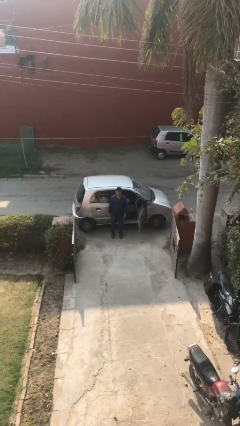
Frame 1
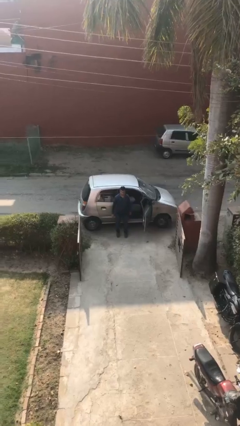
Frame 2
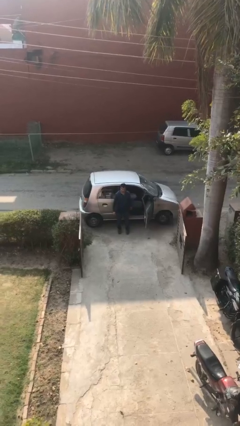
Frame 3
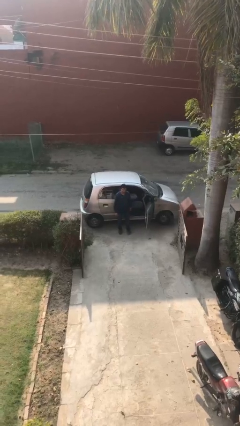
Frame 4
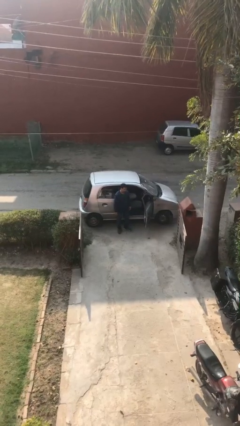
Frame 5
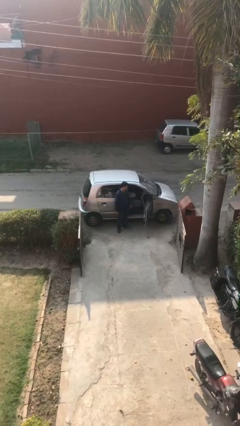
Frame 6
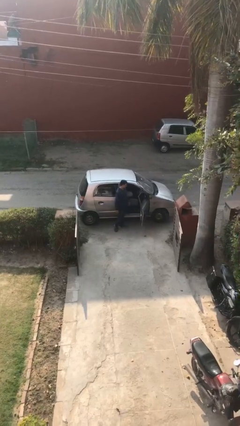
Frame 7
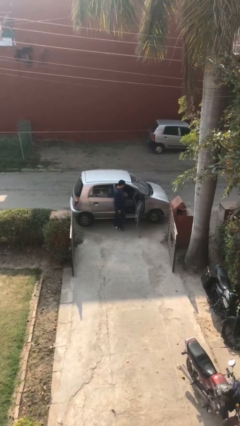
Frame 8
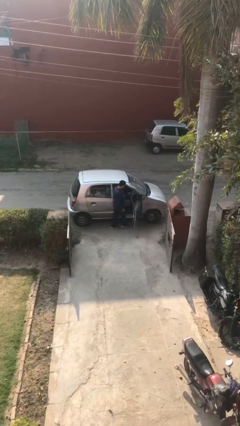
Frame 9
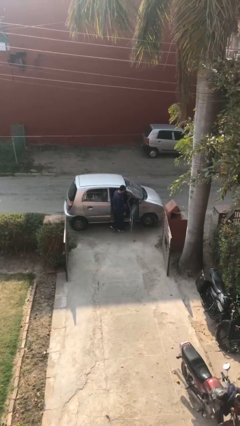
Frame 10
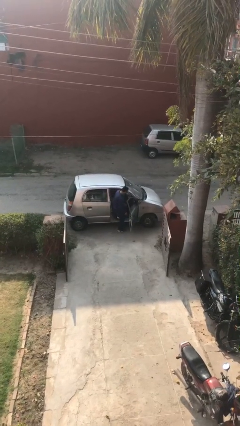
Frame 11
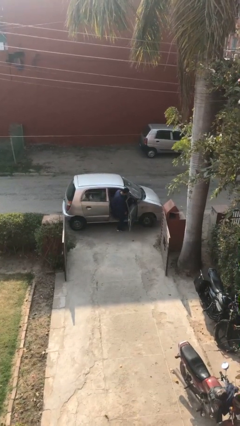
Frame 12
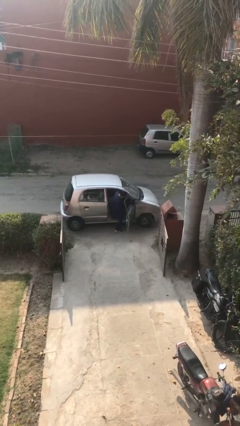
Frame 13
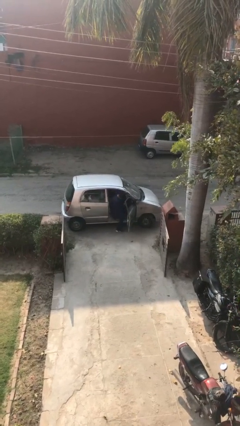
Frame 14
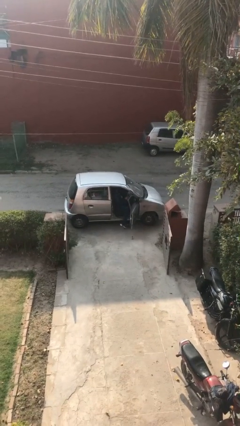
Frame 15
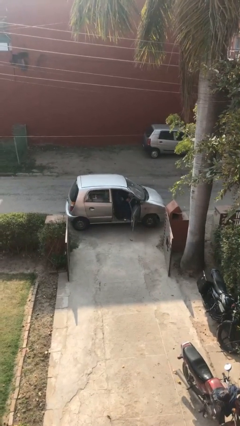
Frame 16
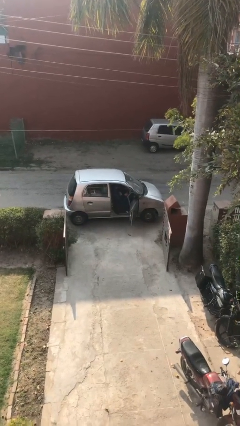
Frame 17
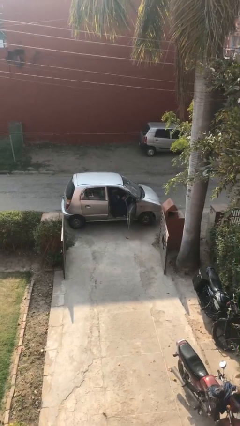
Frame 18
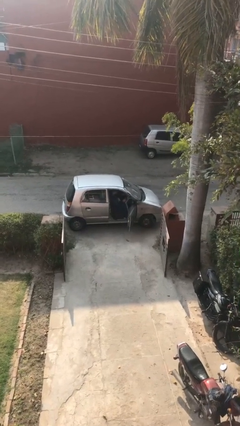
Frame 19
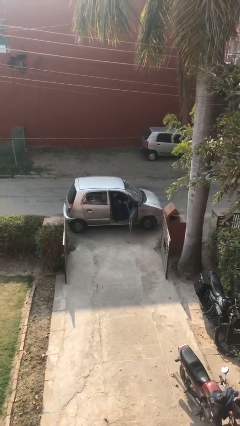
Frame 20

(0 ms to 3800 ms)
person enters car

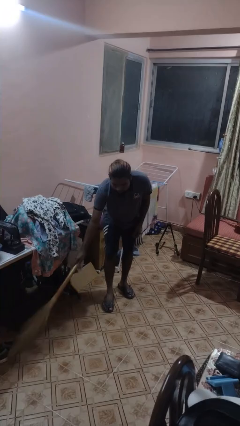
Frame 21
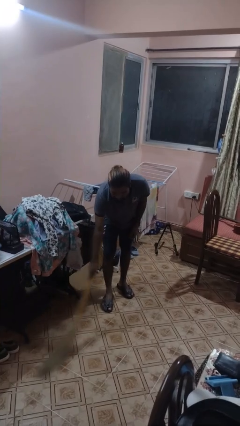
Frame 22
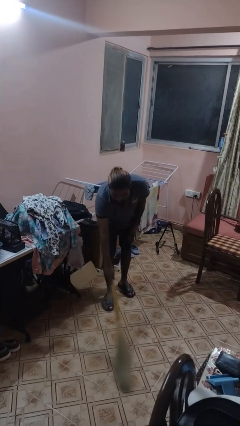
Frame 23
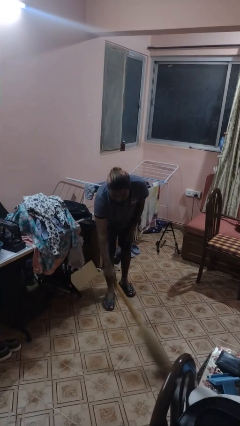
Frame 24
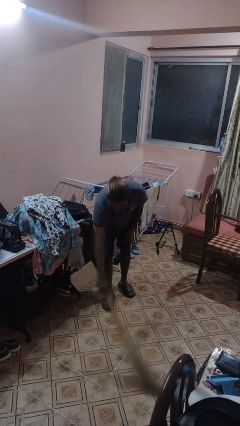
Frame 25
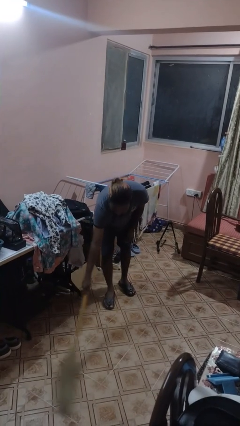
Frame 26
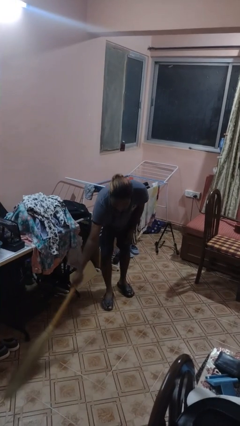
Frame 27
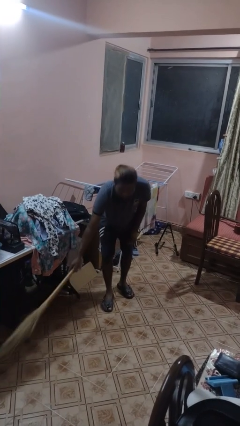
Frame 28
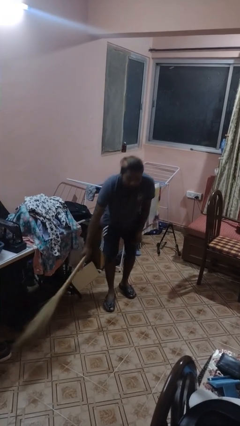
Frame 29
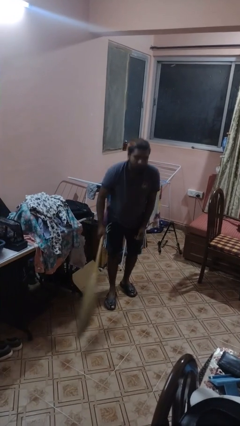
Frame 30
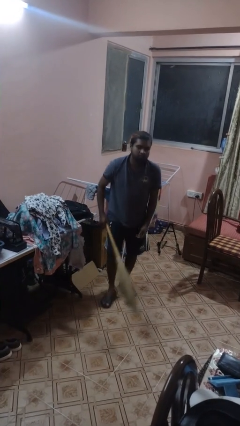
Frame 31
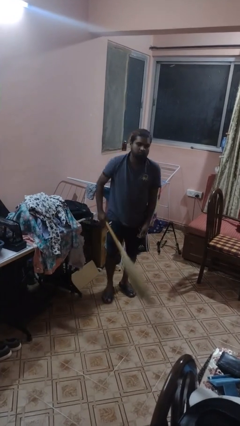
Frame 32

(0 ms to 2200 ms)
person sweeps floor

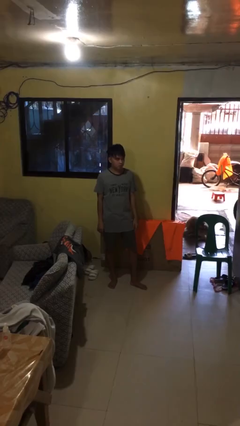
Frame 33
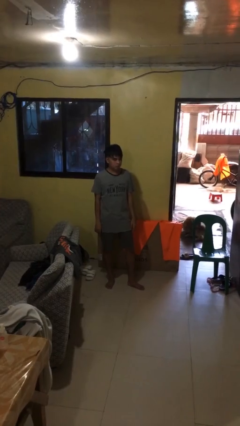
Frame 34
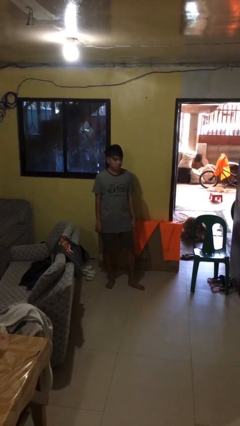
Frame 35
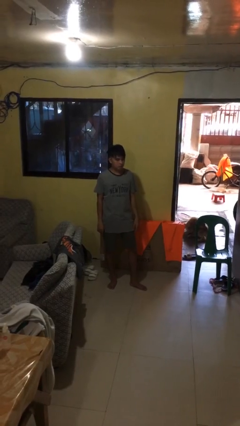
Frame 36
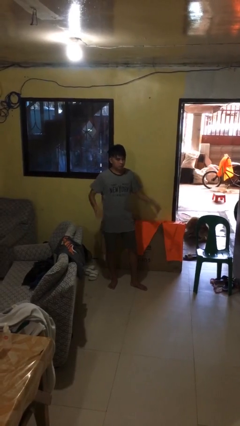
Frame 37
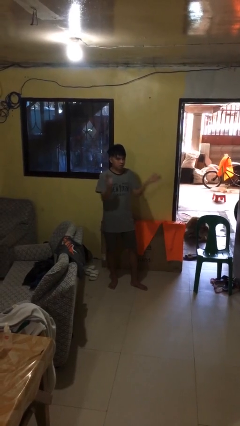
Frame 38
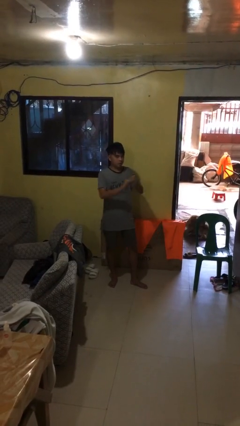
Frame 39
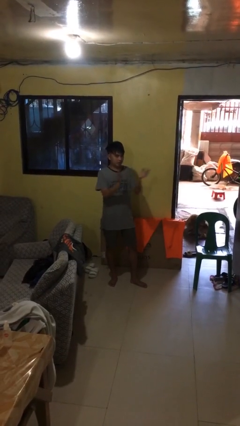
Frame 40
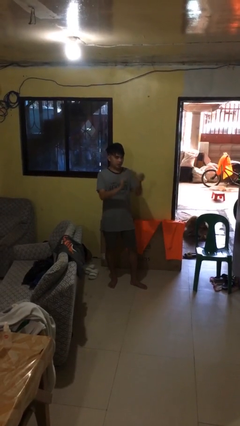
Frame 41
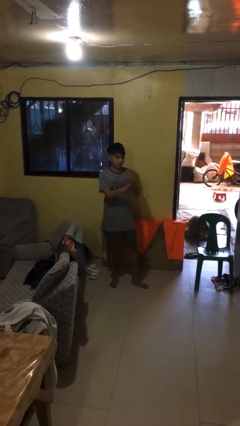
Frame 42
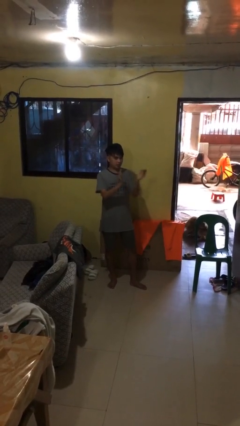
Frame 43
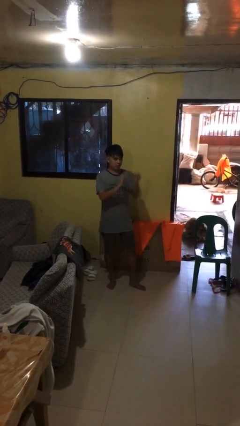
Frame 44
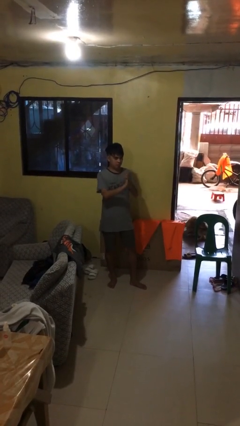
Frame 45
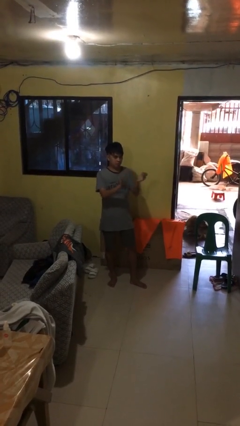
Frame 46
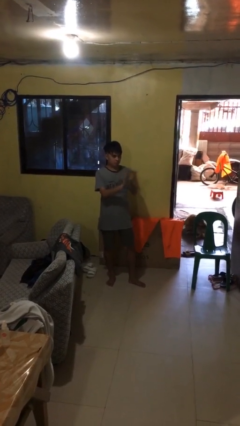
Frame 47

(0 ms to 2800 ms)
person claps hands

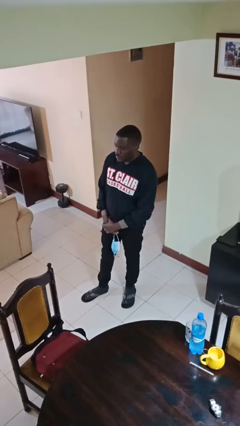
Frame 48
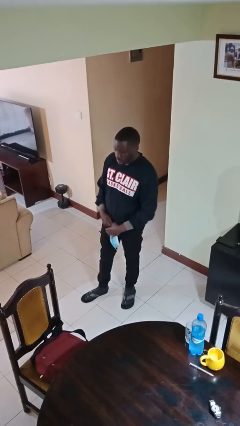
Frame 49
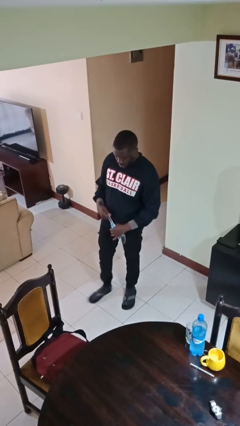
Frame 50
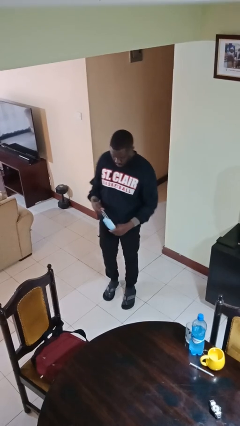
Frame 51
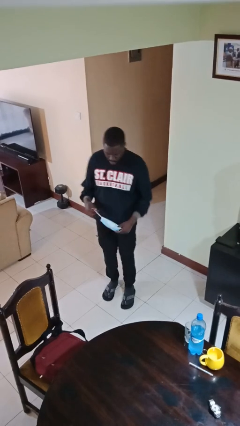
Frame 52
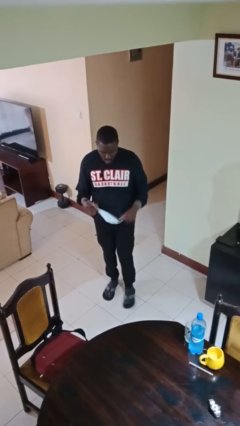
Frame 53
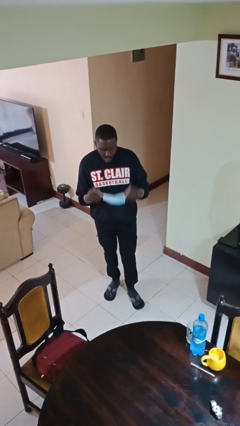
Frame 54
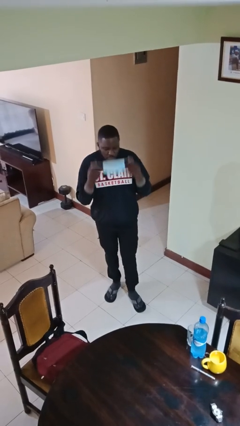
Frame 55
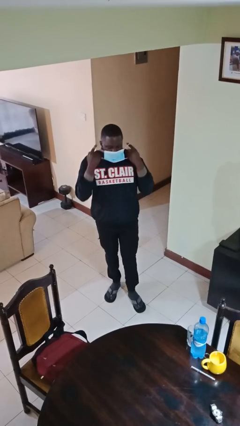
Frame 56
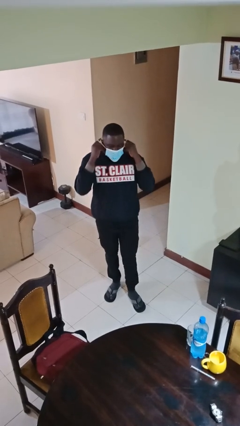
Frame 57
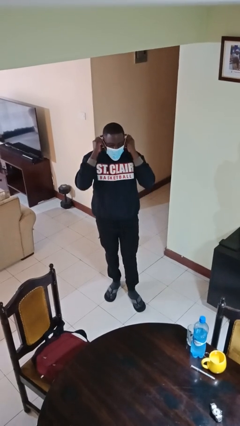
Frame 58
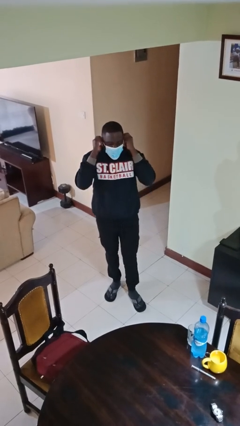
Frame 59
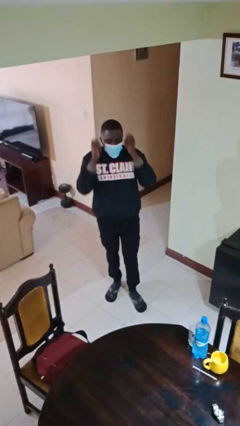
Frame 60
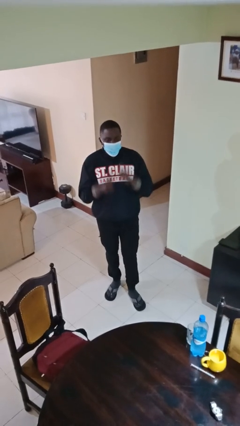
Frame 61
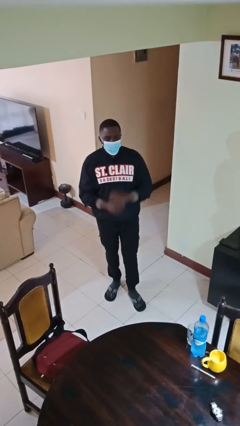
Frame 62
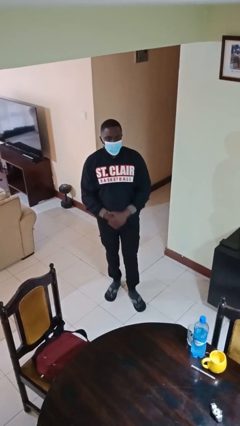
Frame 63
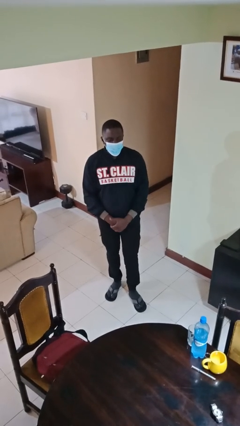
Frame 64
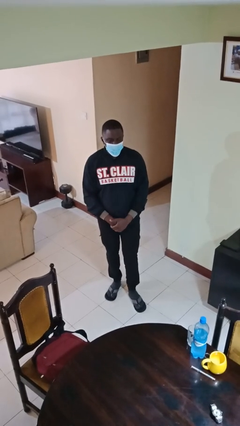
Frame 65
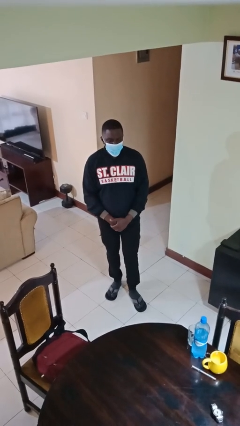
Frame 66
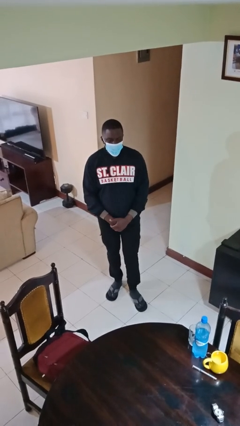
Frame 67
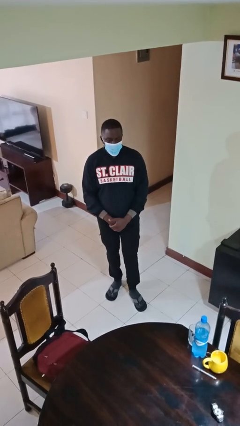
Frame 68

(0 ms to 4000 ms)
person puts on facemask

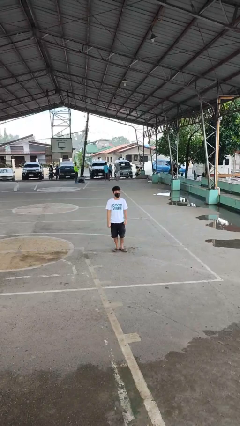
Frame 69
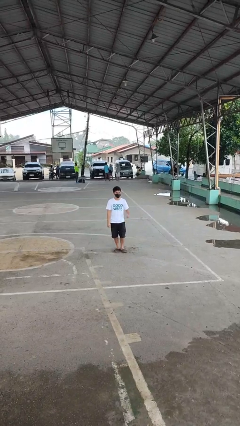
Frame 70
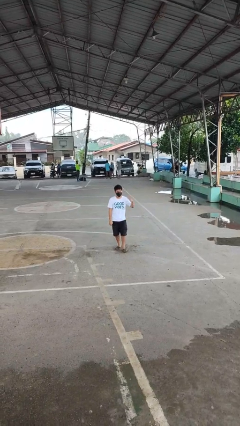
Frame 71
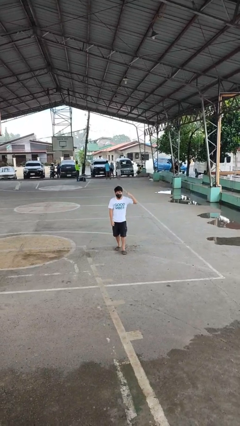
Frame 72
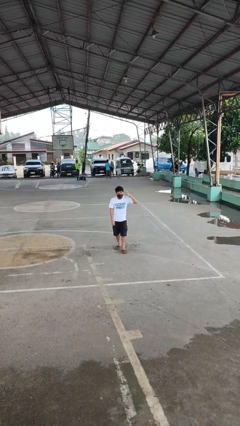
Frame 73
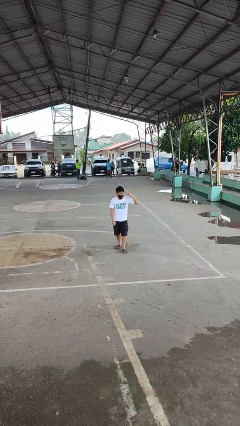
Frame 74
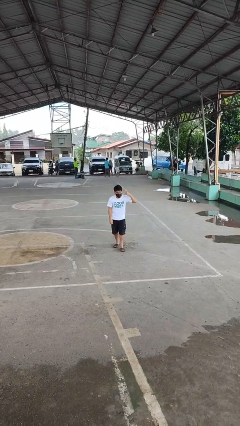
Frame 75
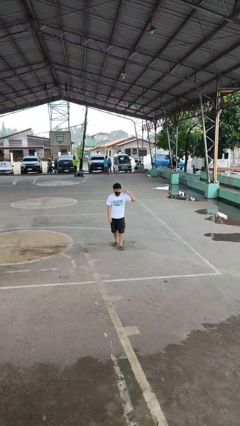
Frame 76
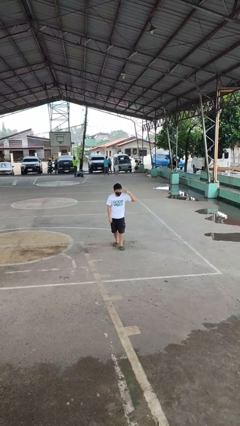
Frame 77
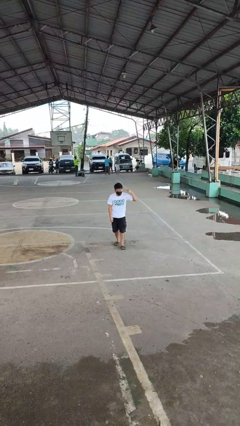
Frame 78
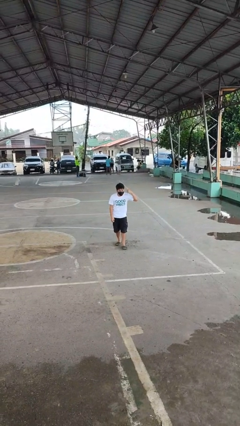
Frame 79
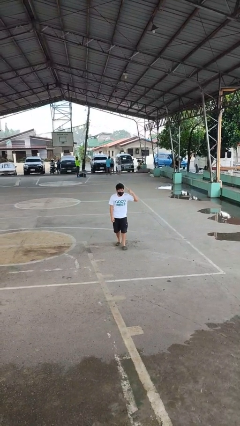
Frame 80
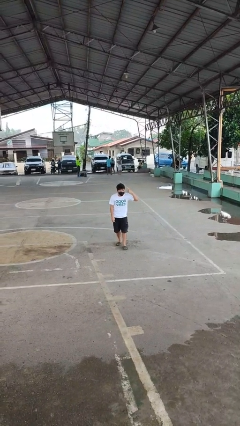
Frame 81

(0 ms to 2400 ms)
person gestures listen closely

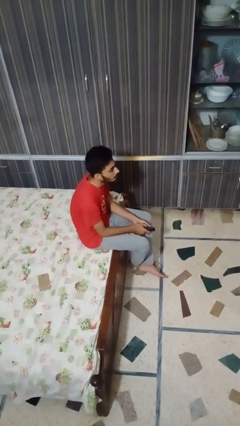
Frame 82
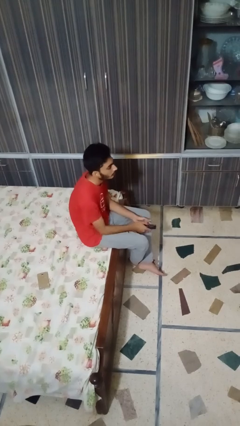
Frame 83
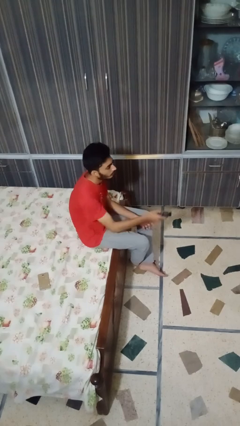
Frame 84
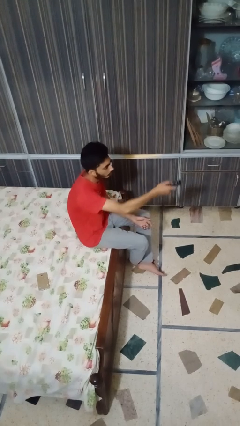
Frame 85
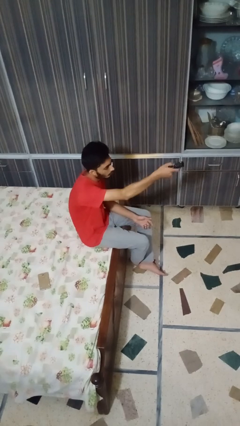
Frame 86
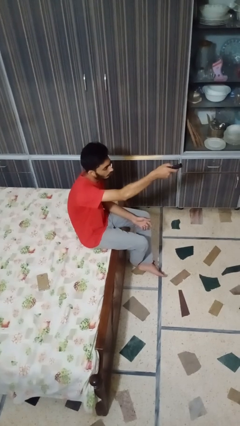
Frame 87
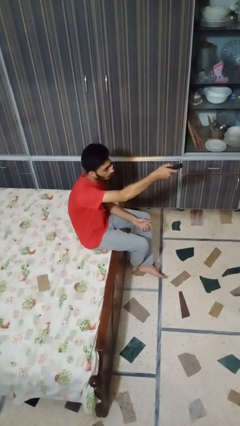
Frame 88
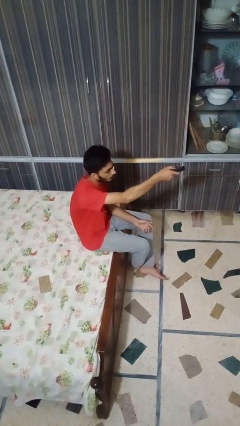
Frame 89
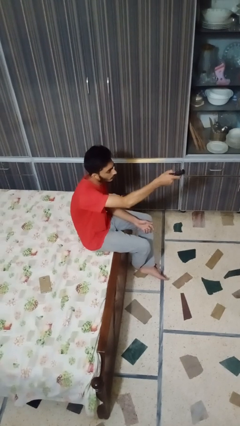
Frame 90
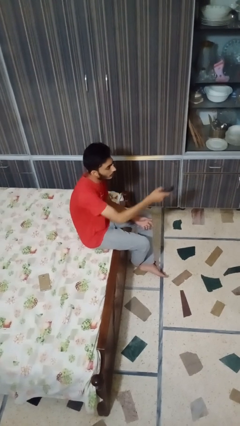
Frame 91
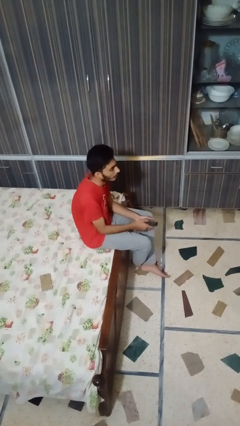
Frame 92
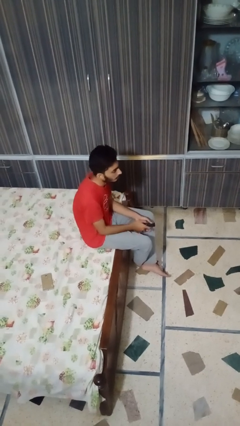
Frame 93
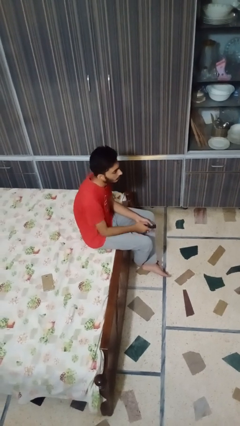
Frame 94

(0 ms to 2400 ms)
person uses television remote
